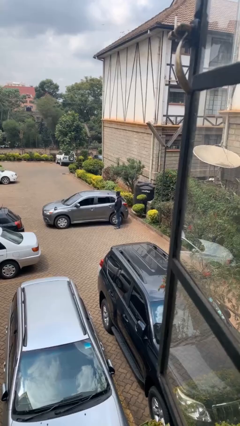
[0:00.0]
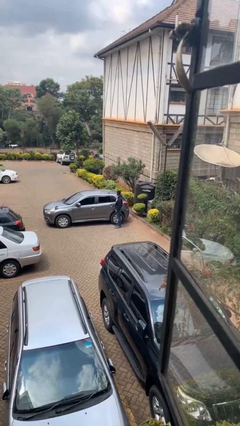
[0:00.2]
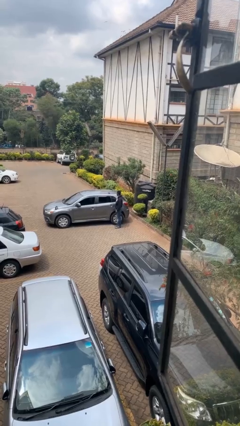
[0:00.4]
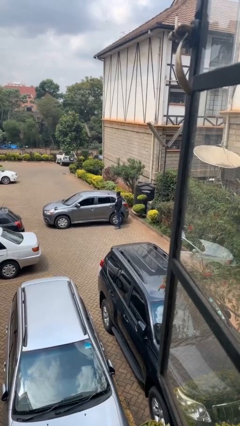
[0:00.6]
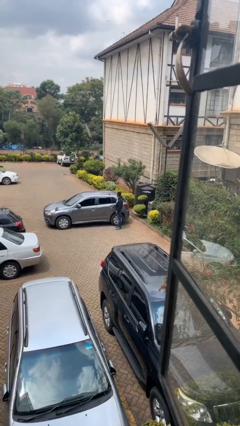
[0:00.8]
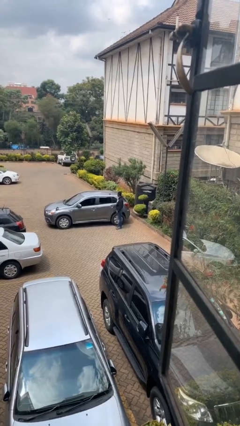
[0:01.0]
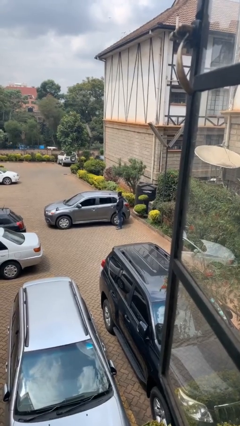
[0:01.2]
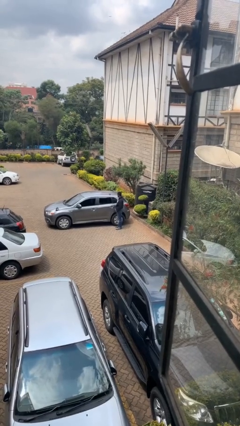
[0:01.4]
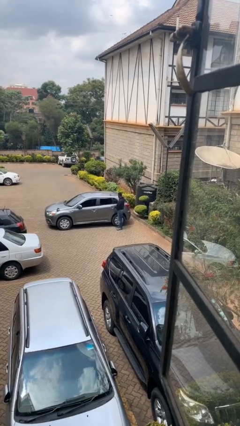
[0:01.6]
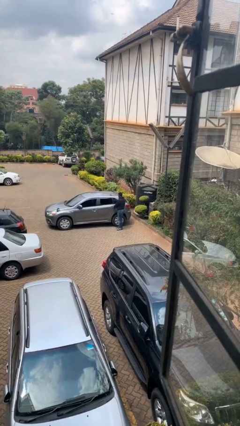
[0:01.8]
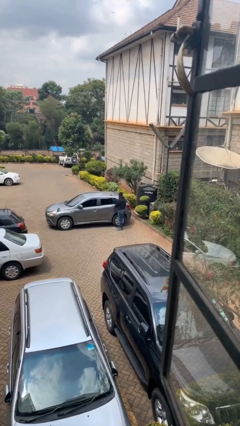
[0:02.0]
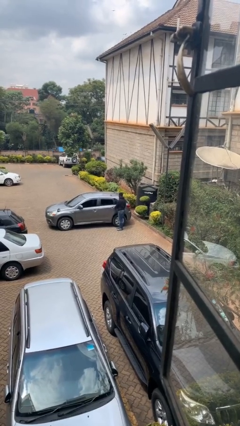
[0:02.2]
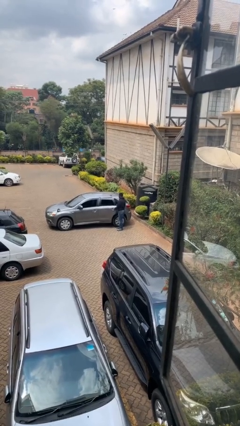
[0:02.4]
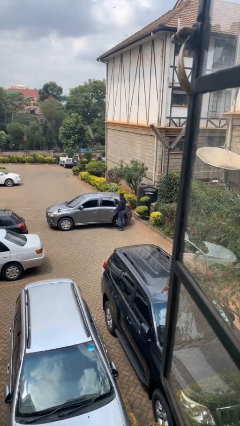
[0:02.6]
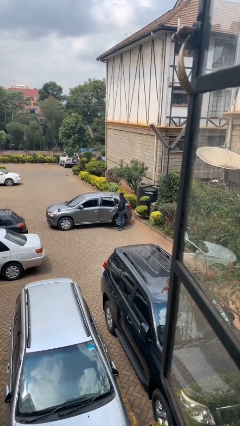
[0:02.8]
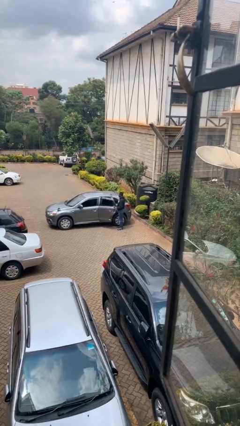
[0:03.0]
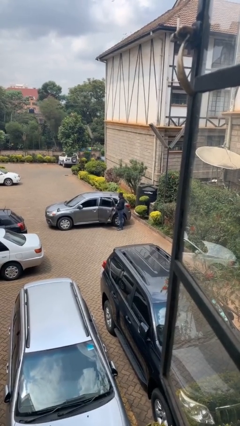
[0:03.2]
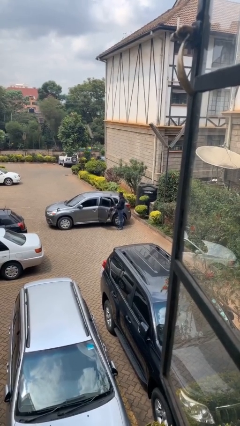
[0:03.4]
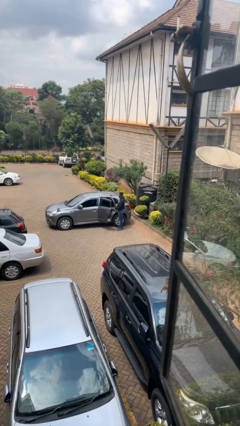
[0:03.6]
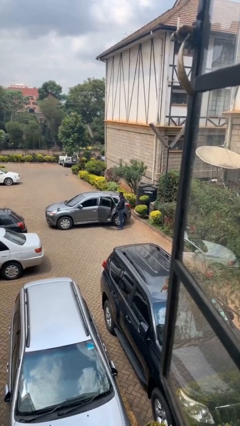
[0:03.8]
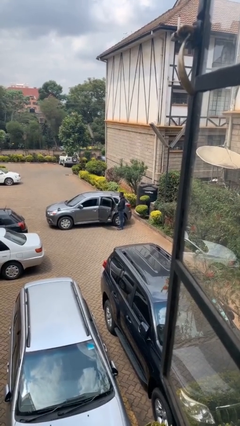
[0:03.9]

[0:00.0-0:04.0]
person opens car door

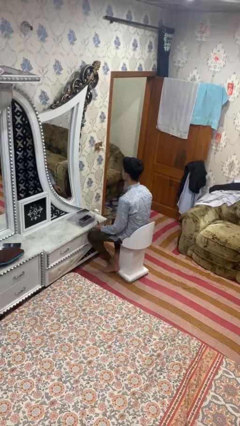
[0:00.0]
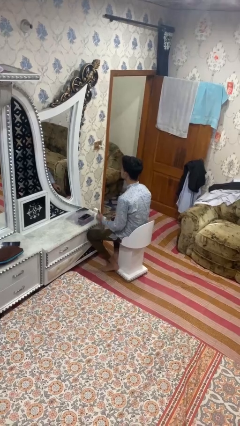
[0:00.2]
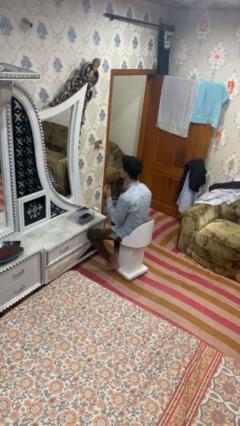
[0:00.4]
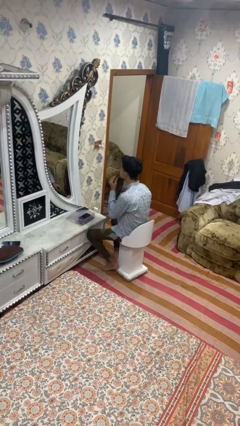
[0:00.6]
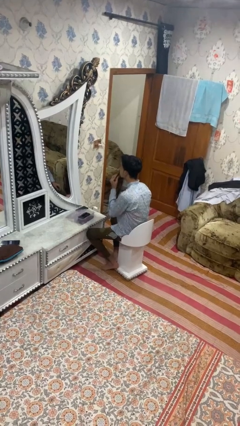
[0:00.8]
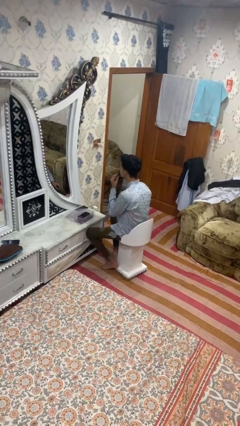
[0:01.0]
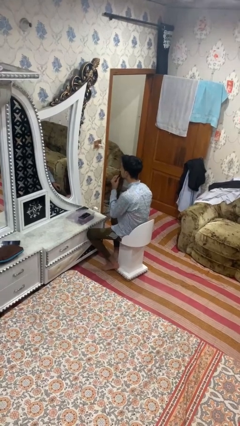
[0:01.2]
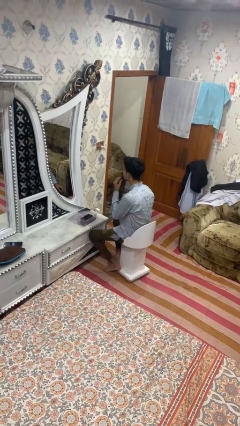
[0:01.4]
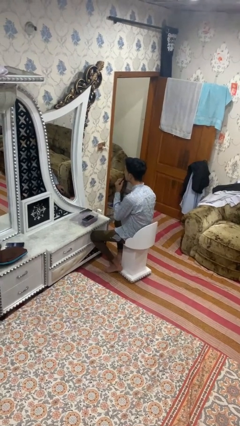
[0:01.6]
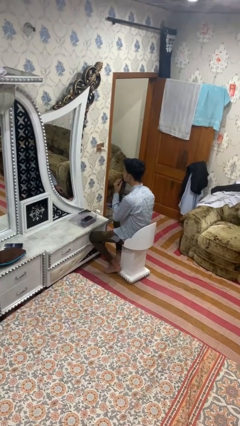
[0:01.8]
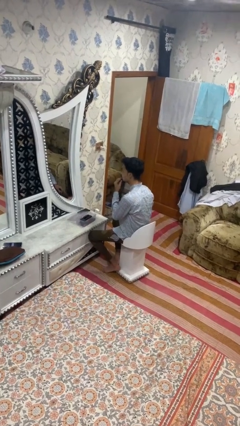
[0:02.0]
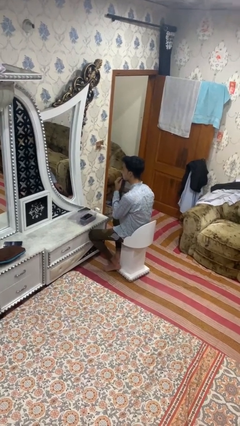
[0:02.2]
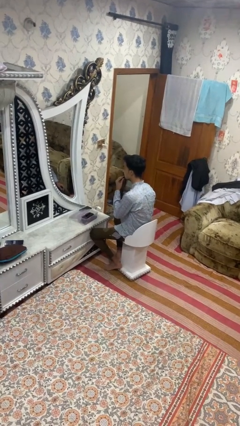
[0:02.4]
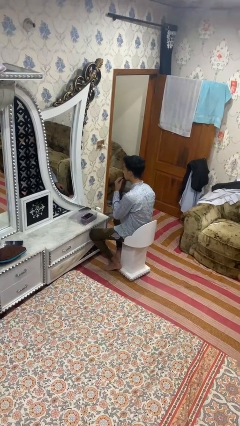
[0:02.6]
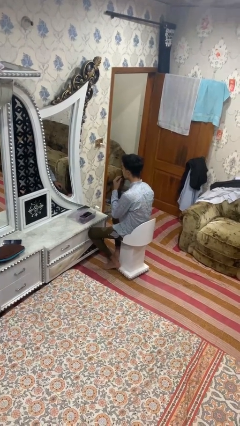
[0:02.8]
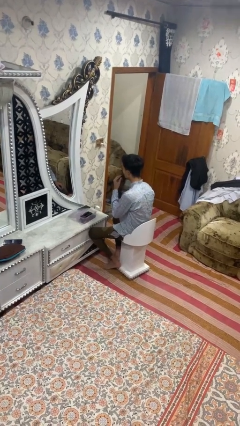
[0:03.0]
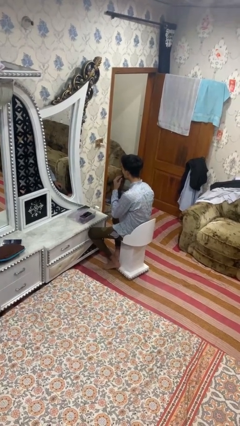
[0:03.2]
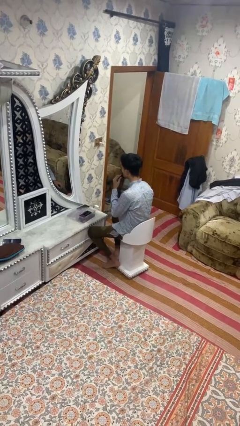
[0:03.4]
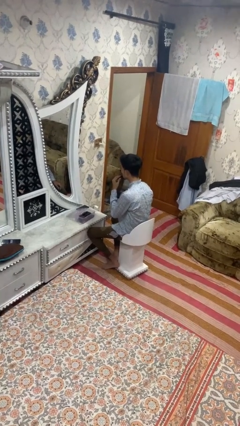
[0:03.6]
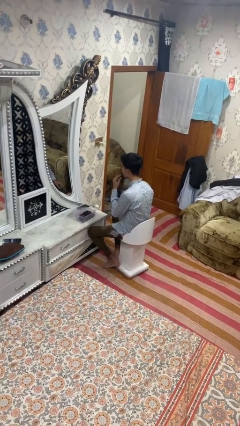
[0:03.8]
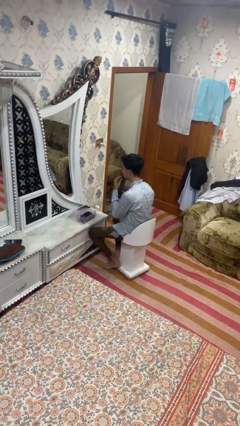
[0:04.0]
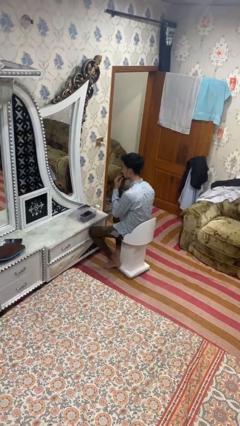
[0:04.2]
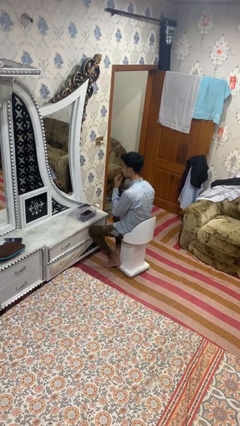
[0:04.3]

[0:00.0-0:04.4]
person applies lip makeup

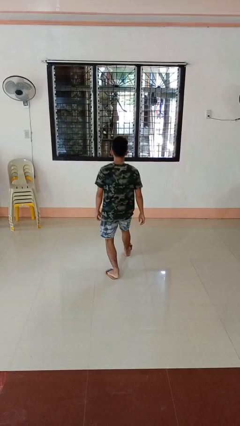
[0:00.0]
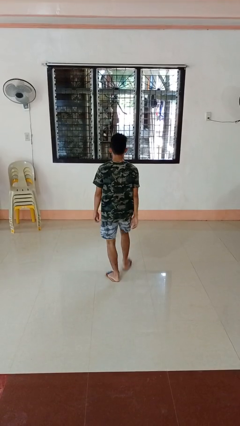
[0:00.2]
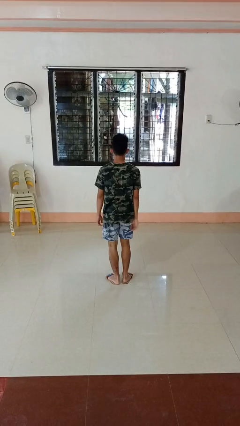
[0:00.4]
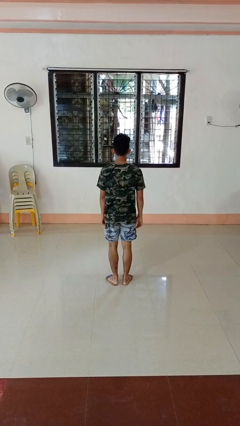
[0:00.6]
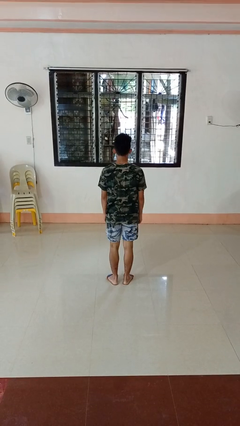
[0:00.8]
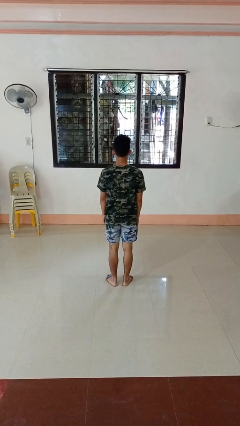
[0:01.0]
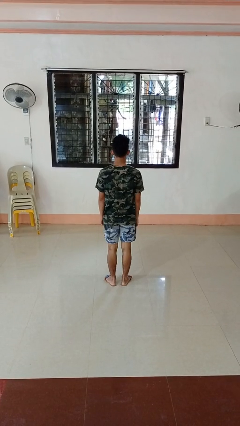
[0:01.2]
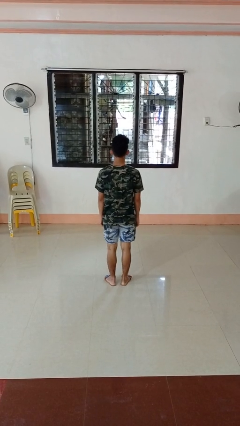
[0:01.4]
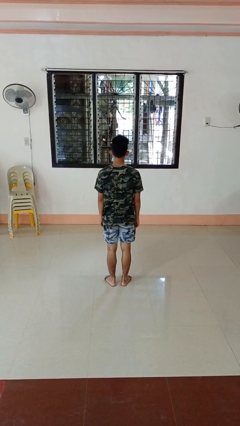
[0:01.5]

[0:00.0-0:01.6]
person stands up from floor

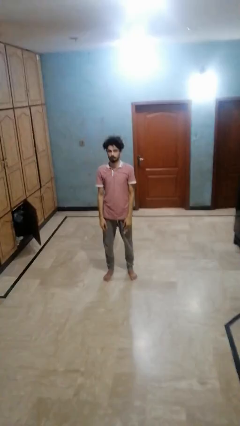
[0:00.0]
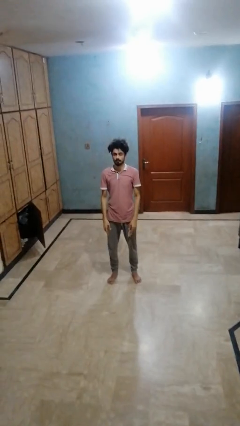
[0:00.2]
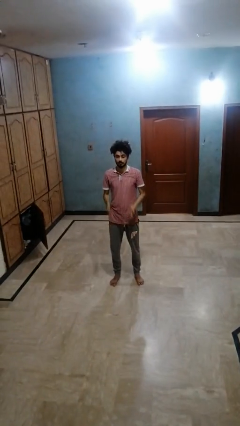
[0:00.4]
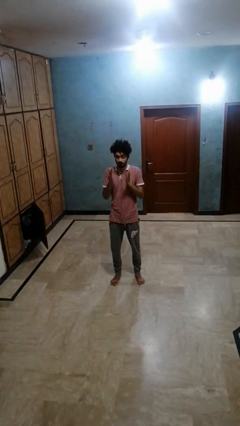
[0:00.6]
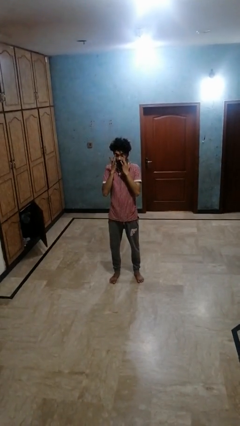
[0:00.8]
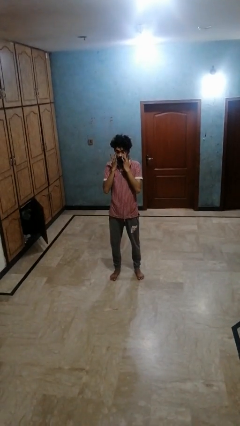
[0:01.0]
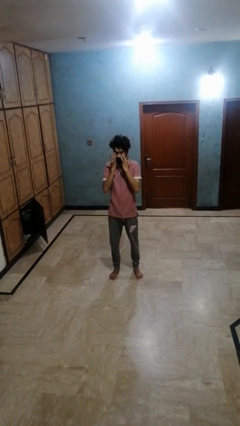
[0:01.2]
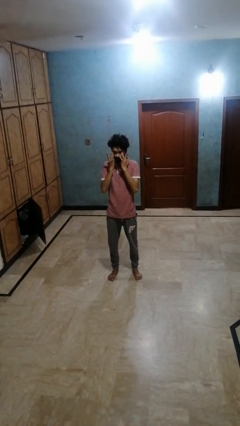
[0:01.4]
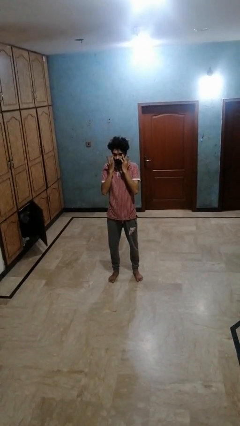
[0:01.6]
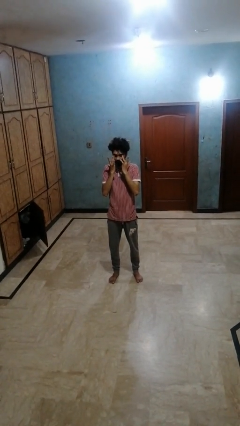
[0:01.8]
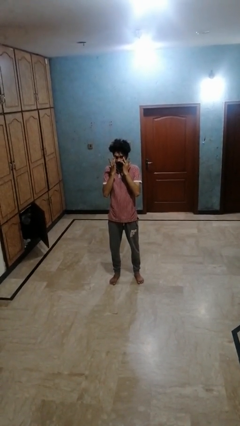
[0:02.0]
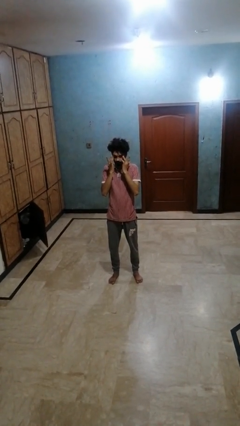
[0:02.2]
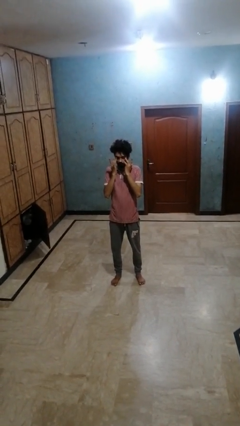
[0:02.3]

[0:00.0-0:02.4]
person rubs eyes

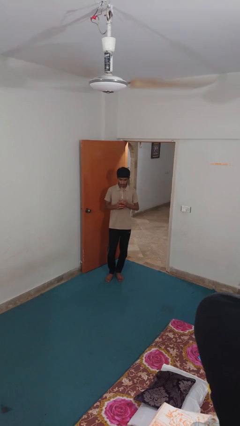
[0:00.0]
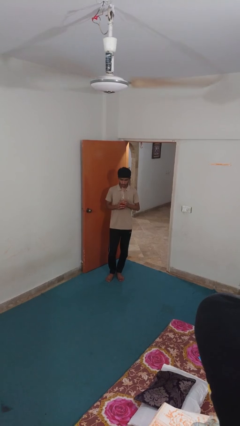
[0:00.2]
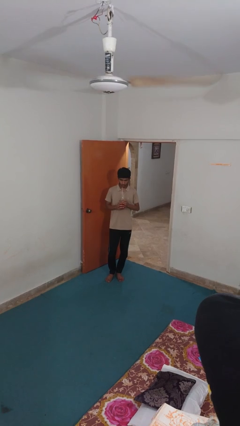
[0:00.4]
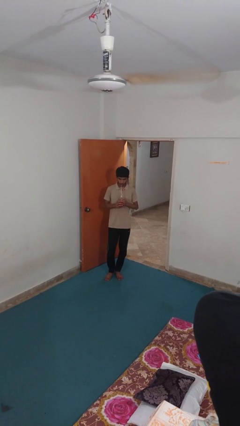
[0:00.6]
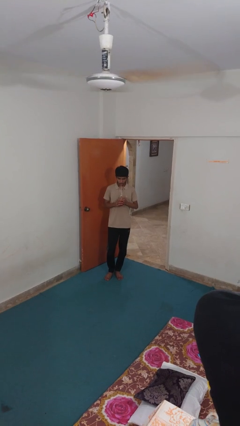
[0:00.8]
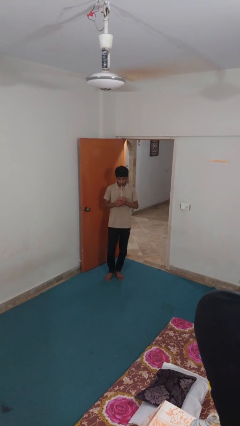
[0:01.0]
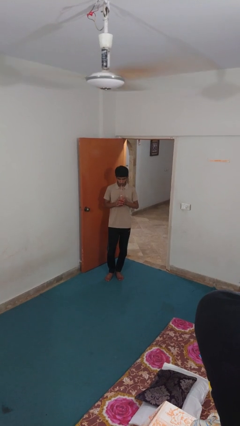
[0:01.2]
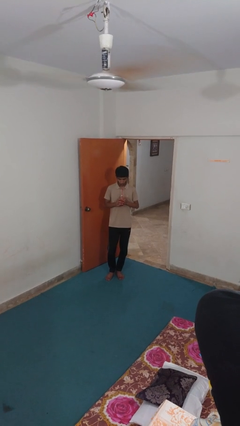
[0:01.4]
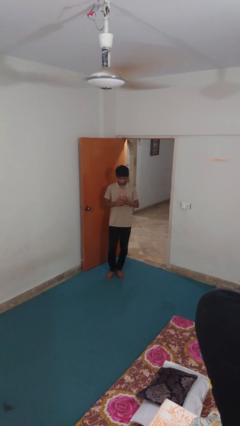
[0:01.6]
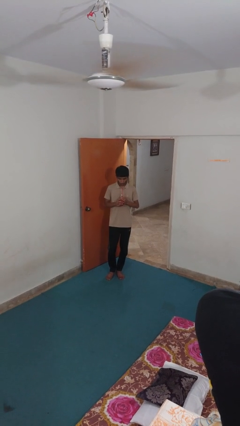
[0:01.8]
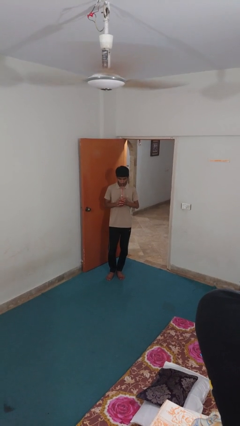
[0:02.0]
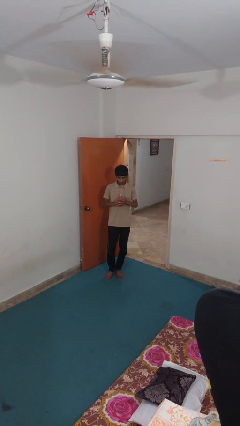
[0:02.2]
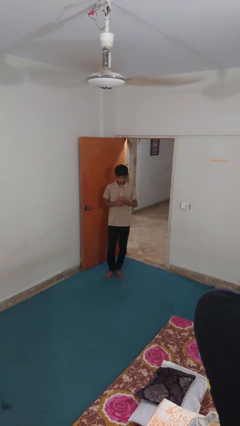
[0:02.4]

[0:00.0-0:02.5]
person drinks from straw

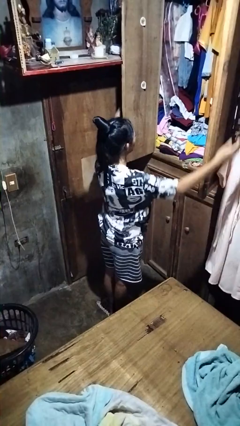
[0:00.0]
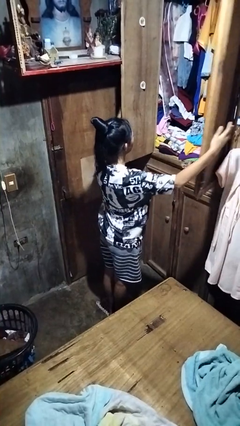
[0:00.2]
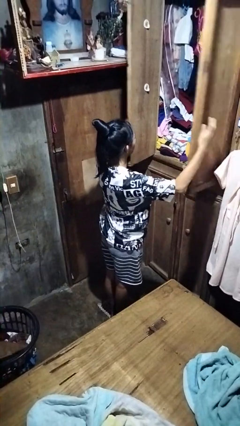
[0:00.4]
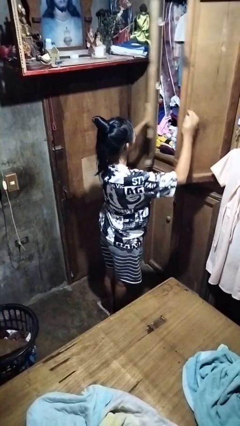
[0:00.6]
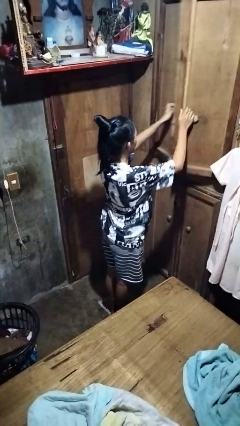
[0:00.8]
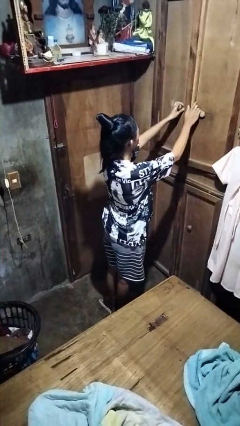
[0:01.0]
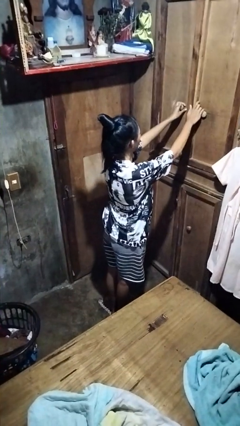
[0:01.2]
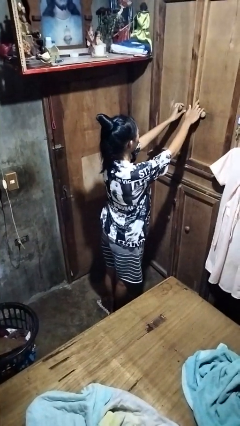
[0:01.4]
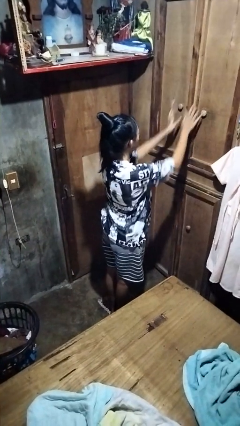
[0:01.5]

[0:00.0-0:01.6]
person closes closet door

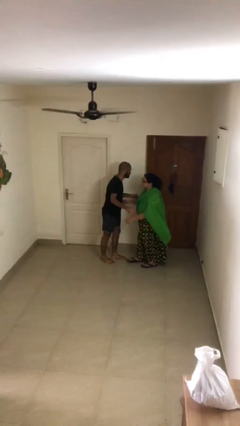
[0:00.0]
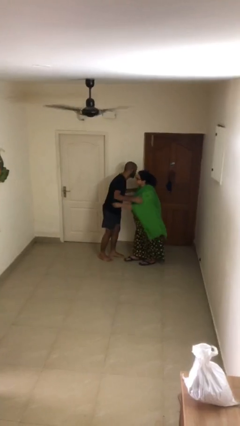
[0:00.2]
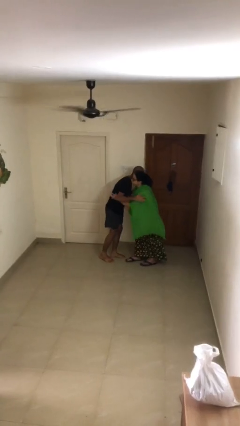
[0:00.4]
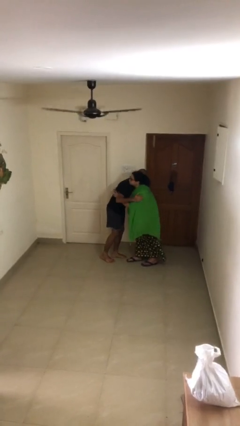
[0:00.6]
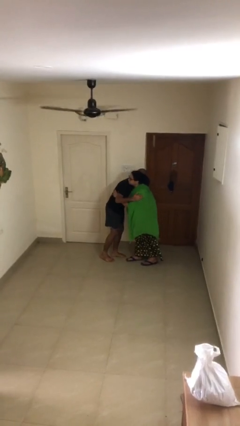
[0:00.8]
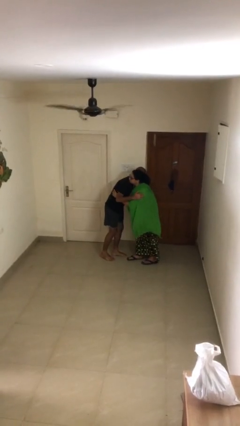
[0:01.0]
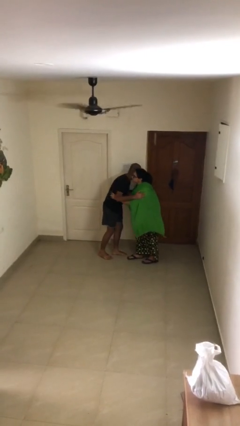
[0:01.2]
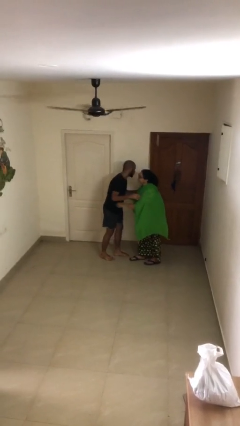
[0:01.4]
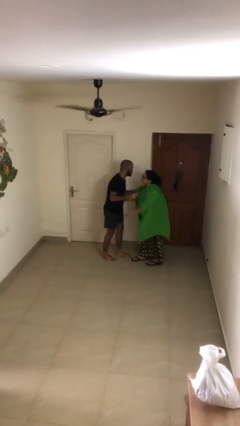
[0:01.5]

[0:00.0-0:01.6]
person embraces person
